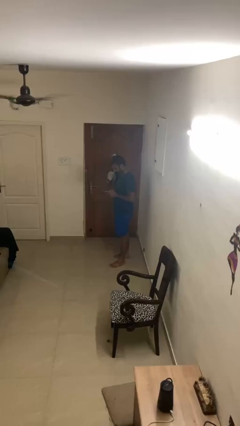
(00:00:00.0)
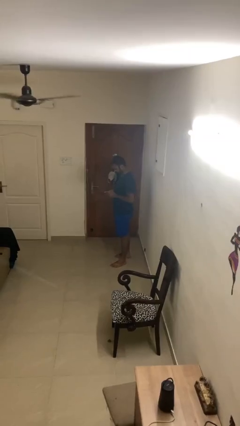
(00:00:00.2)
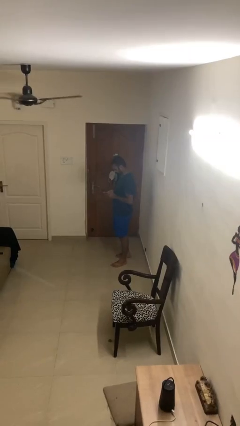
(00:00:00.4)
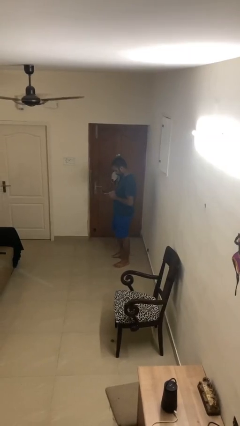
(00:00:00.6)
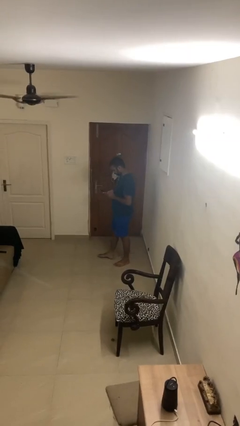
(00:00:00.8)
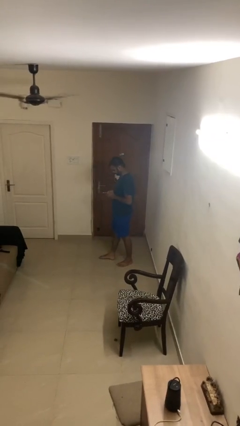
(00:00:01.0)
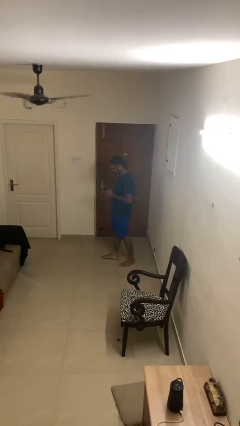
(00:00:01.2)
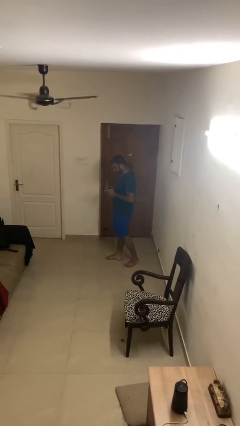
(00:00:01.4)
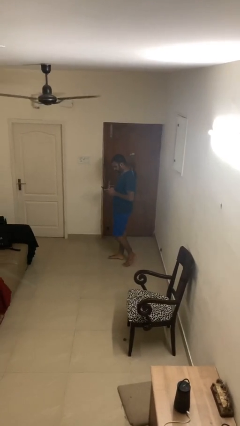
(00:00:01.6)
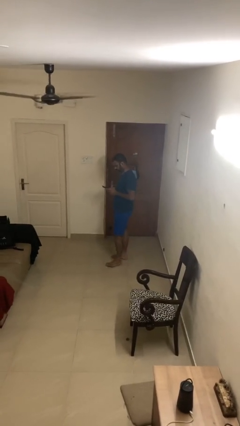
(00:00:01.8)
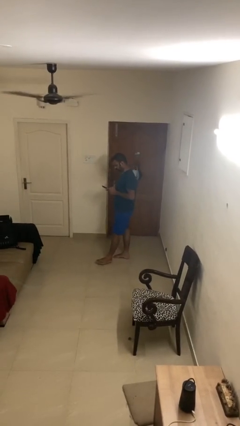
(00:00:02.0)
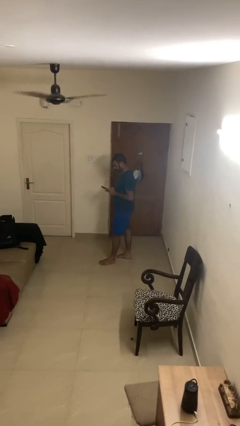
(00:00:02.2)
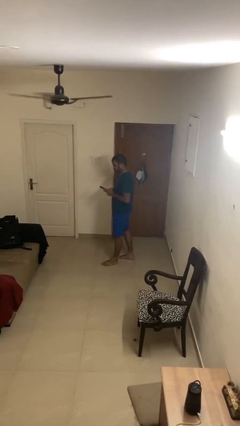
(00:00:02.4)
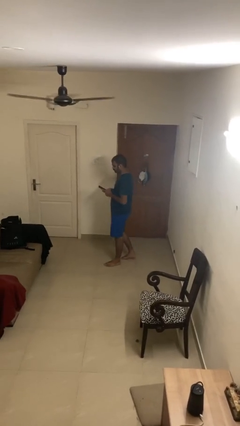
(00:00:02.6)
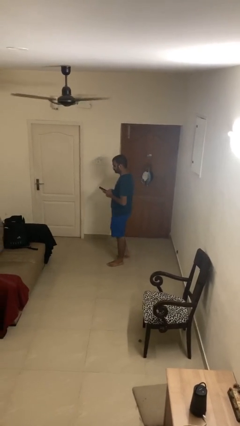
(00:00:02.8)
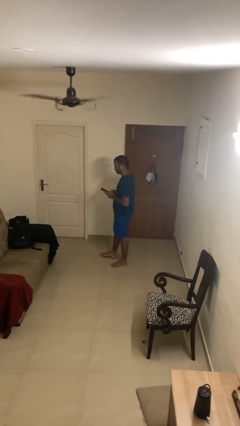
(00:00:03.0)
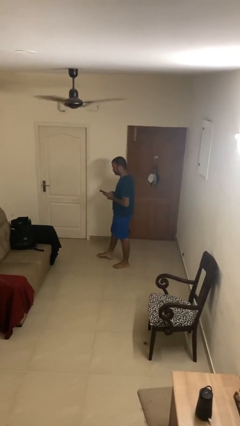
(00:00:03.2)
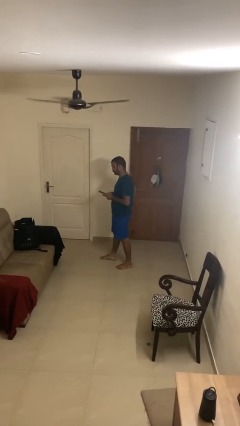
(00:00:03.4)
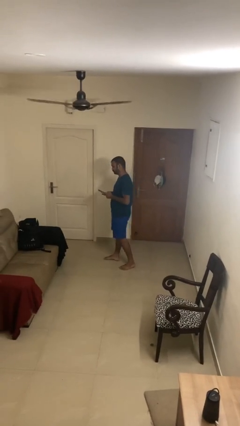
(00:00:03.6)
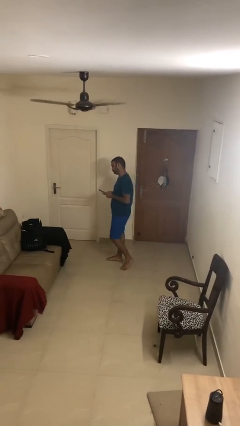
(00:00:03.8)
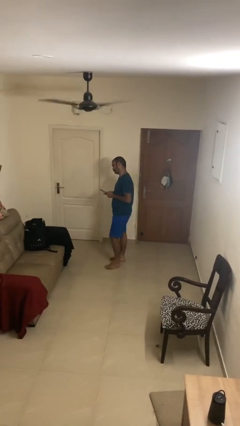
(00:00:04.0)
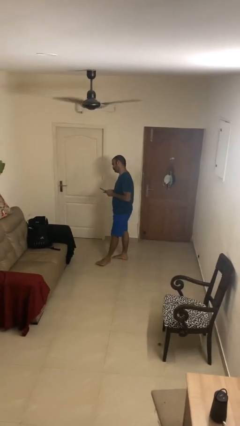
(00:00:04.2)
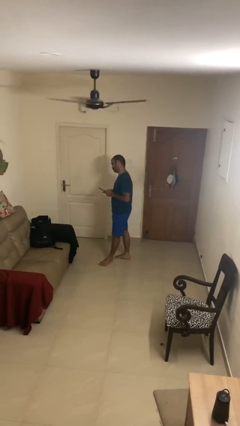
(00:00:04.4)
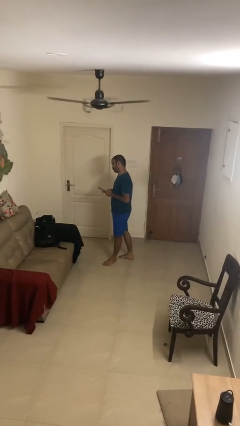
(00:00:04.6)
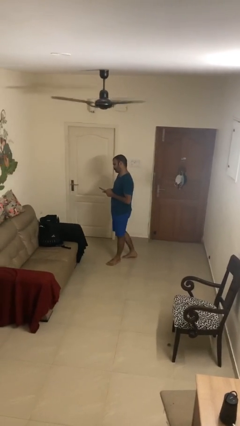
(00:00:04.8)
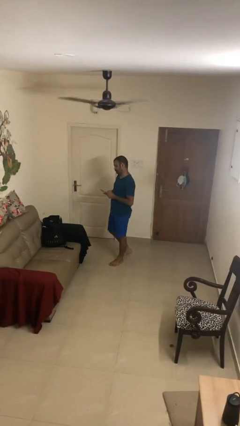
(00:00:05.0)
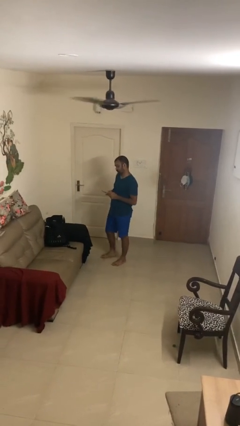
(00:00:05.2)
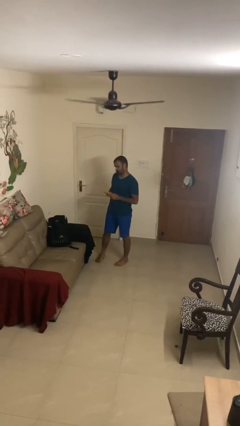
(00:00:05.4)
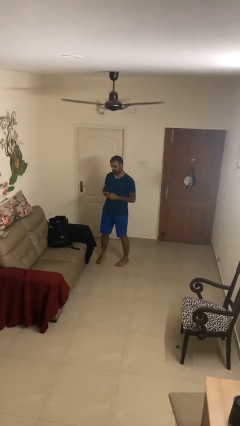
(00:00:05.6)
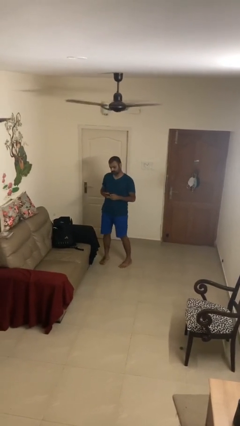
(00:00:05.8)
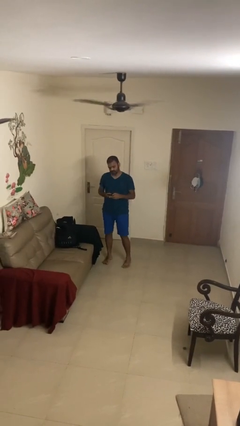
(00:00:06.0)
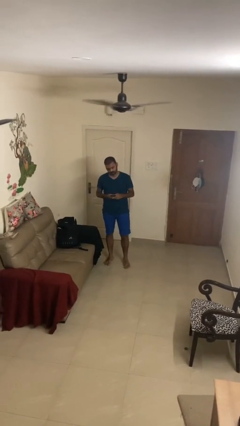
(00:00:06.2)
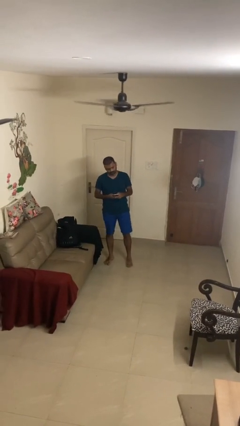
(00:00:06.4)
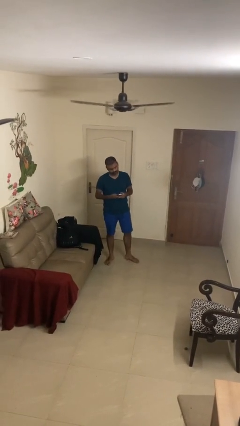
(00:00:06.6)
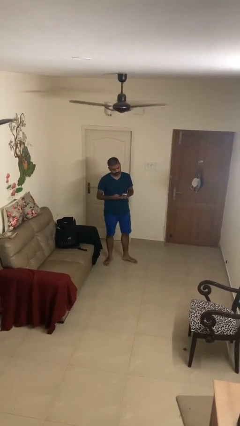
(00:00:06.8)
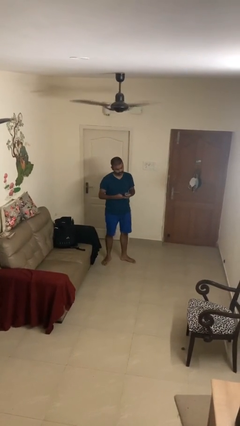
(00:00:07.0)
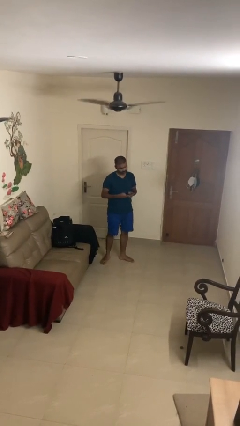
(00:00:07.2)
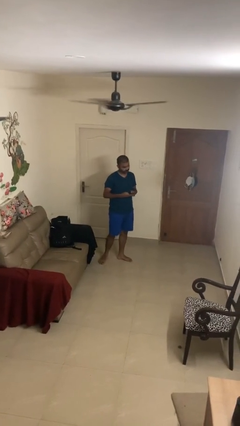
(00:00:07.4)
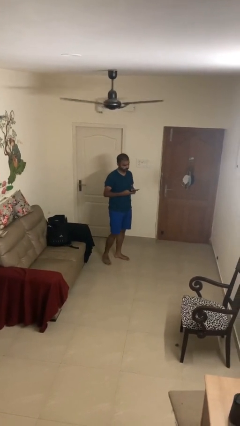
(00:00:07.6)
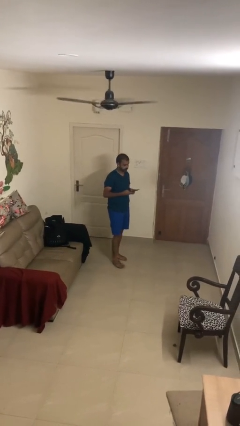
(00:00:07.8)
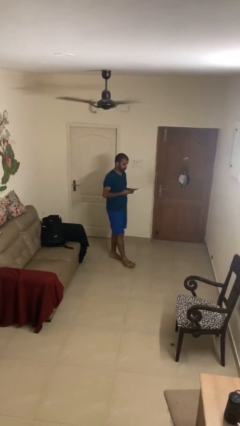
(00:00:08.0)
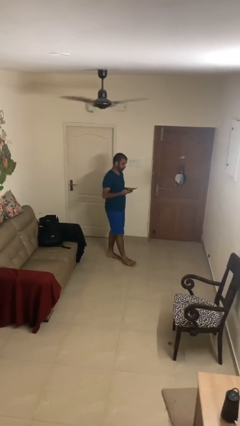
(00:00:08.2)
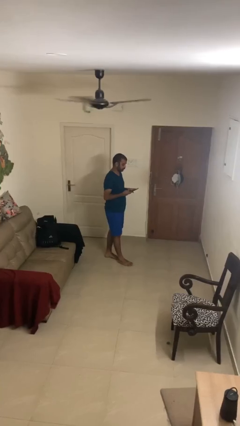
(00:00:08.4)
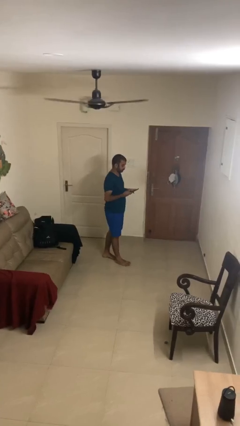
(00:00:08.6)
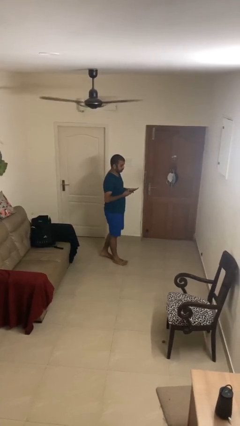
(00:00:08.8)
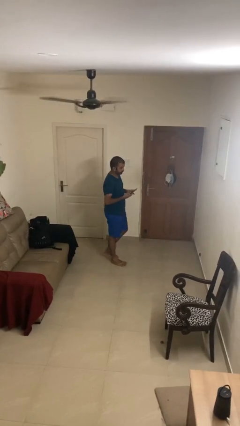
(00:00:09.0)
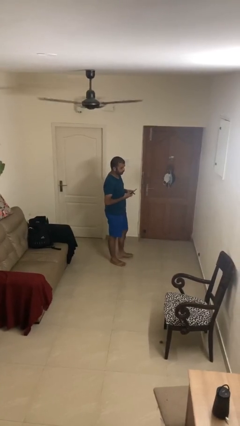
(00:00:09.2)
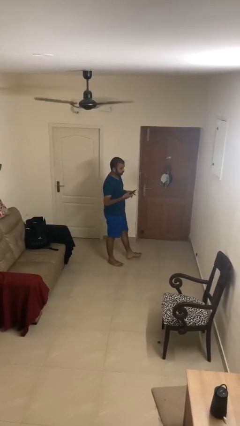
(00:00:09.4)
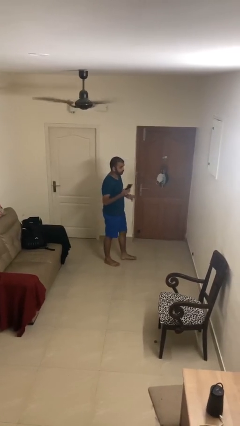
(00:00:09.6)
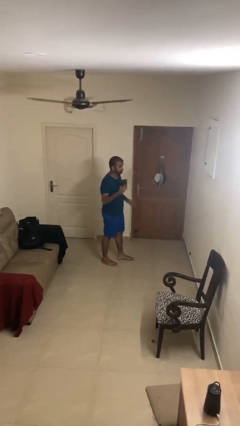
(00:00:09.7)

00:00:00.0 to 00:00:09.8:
person texts on phone

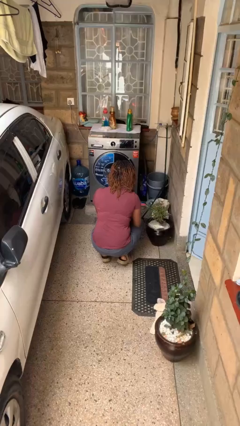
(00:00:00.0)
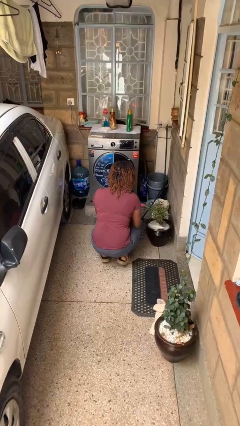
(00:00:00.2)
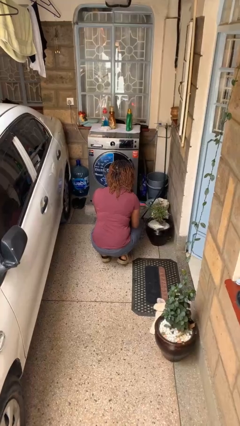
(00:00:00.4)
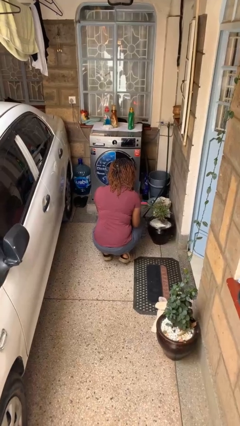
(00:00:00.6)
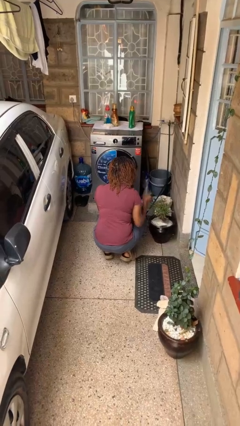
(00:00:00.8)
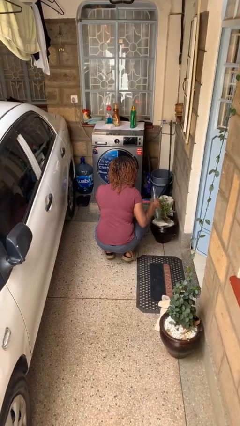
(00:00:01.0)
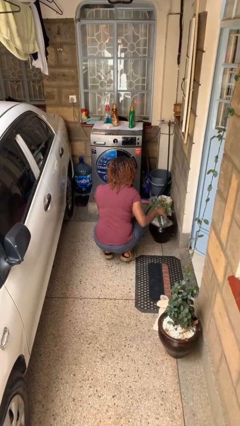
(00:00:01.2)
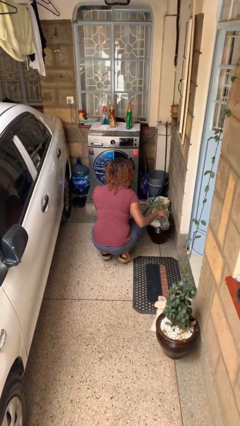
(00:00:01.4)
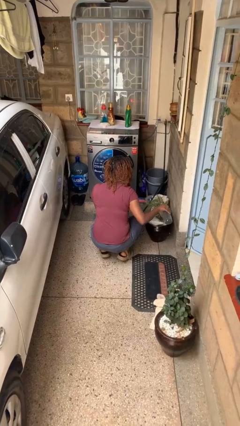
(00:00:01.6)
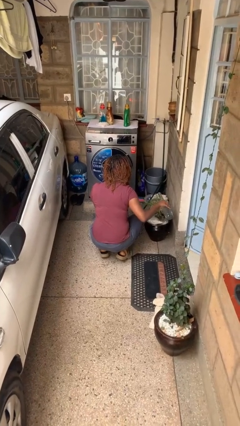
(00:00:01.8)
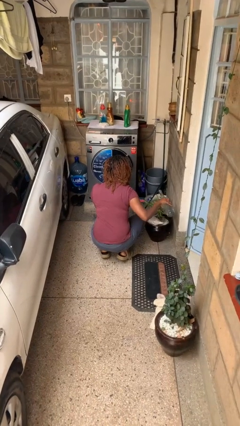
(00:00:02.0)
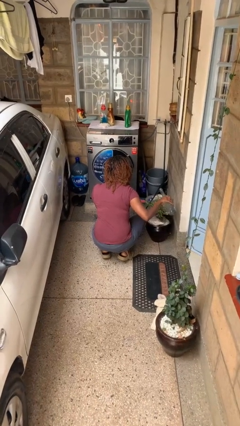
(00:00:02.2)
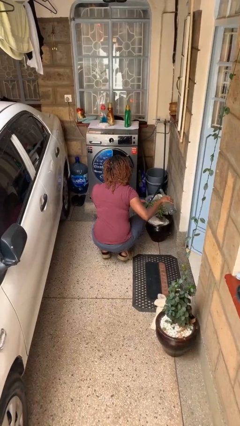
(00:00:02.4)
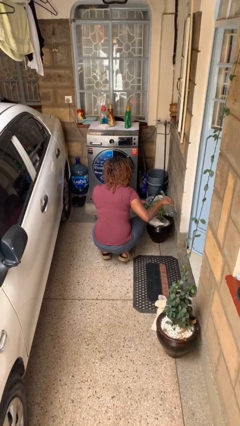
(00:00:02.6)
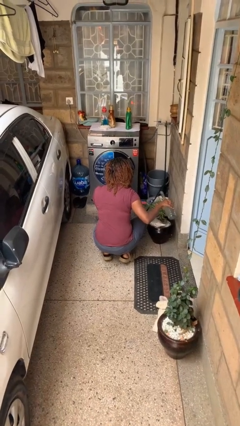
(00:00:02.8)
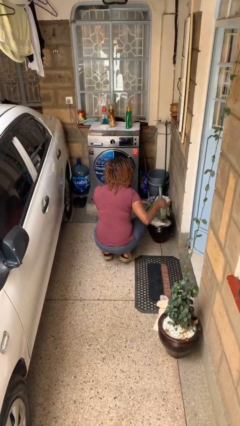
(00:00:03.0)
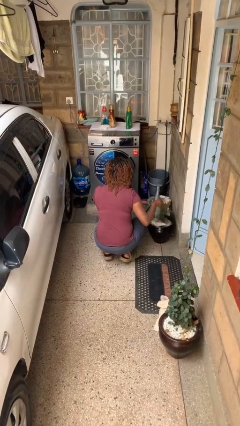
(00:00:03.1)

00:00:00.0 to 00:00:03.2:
person waters houseplant

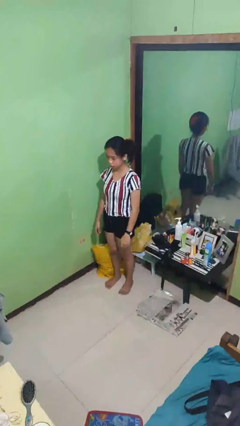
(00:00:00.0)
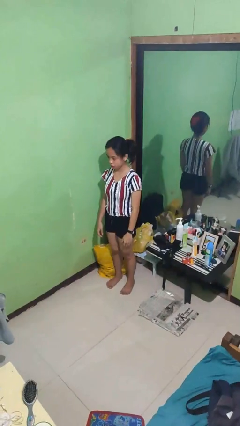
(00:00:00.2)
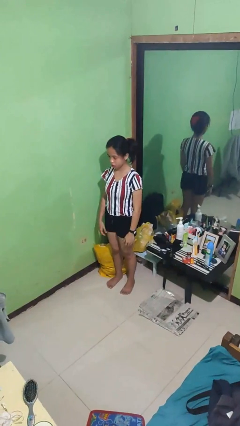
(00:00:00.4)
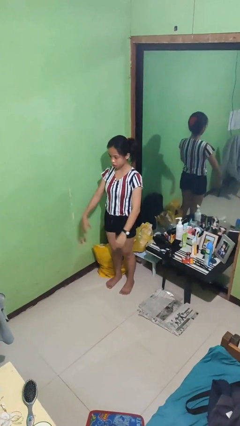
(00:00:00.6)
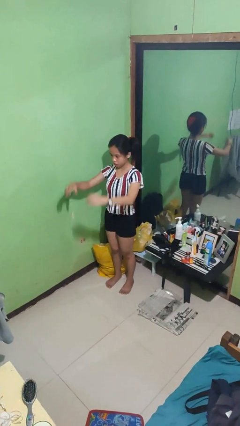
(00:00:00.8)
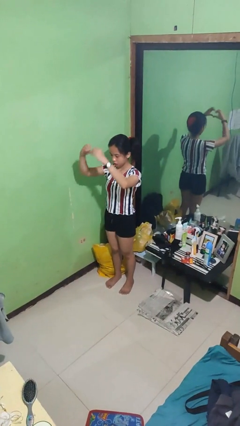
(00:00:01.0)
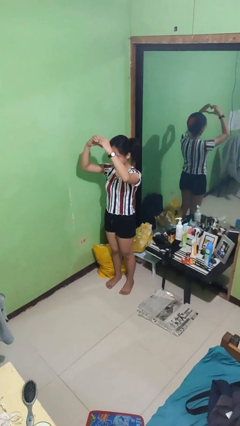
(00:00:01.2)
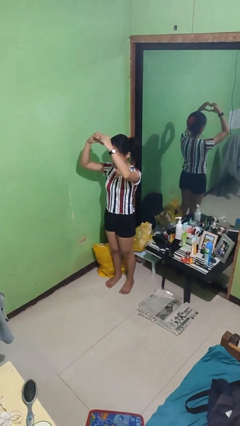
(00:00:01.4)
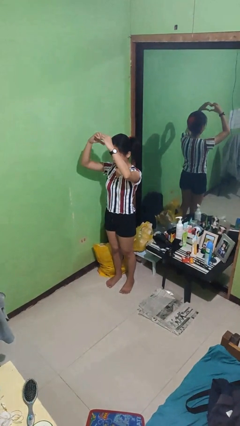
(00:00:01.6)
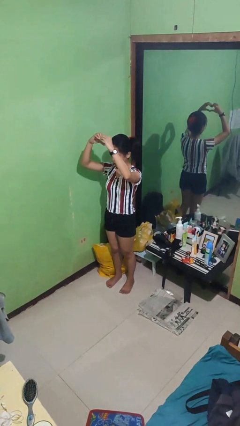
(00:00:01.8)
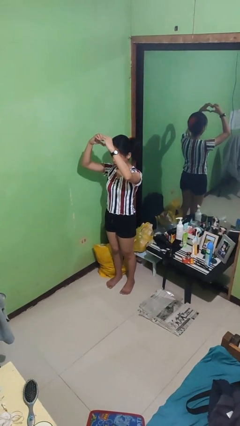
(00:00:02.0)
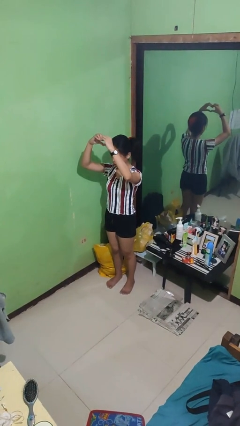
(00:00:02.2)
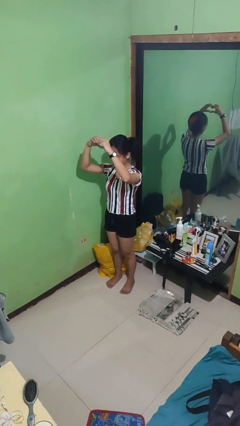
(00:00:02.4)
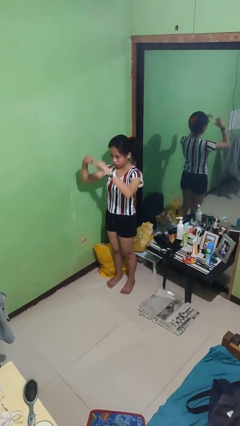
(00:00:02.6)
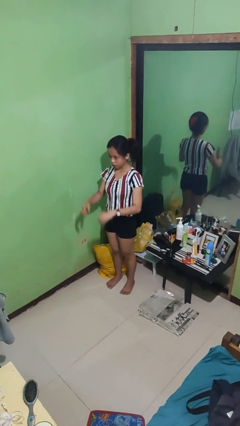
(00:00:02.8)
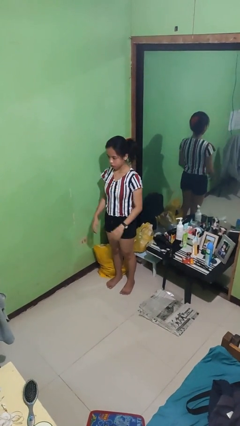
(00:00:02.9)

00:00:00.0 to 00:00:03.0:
person gestures heart

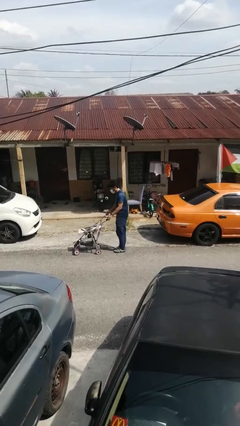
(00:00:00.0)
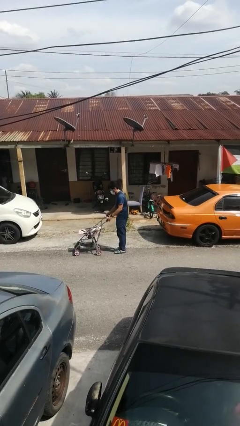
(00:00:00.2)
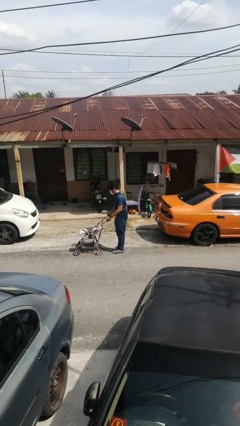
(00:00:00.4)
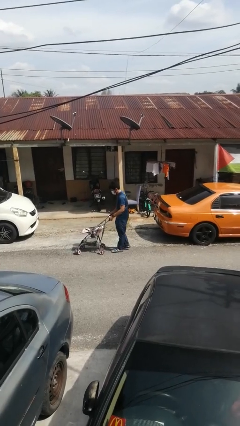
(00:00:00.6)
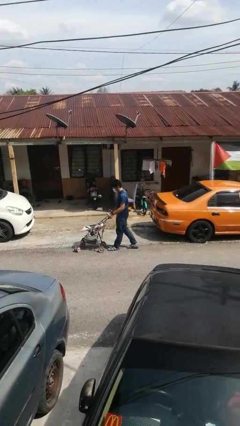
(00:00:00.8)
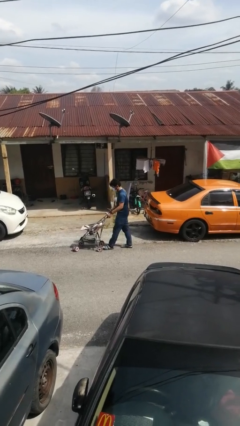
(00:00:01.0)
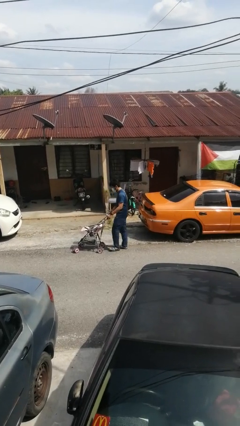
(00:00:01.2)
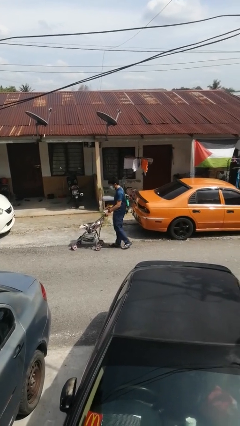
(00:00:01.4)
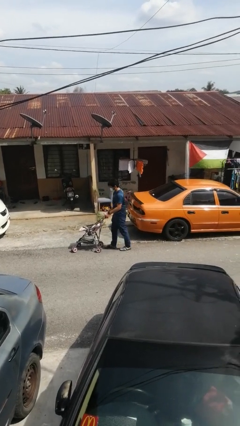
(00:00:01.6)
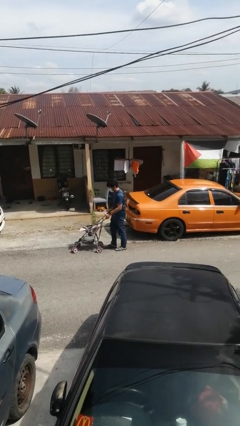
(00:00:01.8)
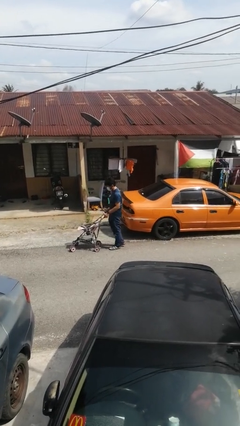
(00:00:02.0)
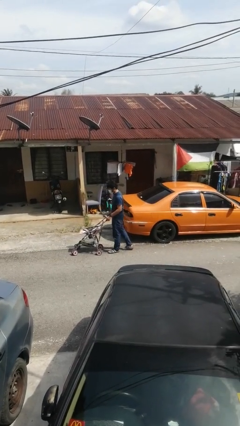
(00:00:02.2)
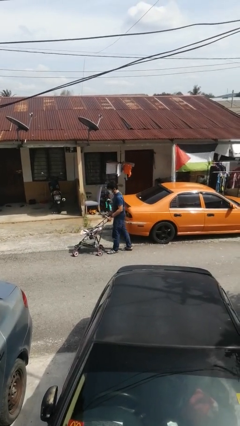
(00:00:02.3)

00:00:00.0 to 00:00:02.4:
person pulls wheeled cart
